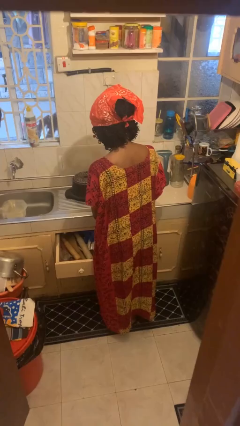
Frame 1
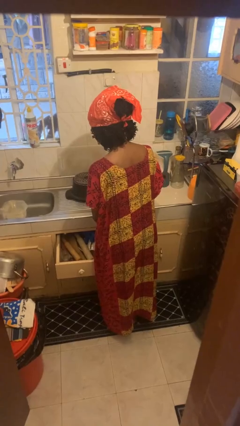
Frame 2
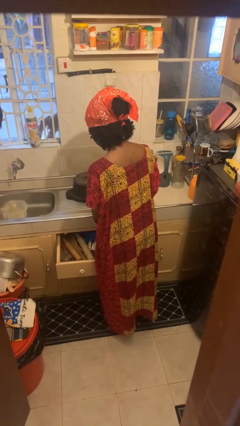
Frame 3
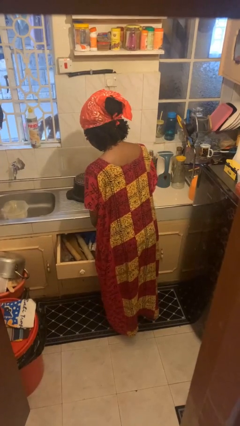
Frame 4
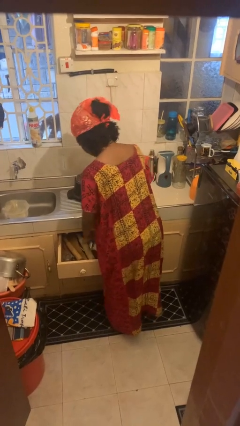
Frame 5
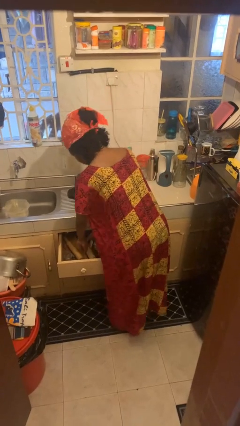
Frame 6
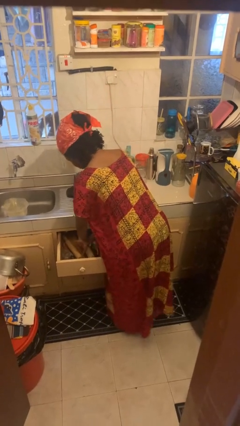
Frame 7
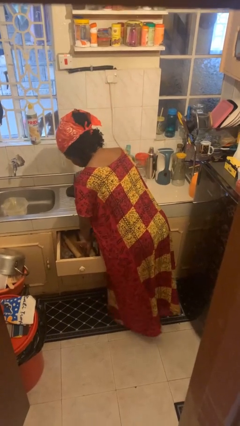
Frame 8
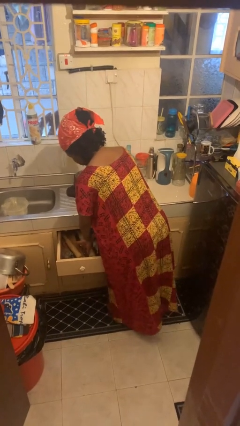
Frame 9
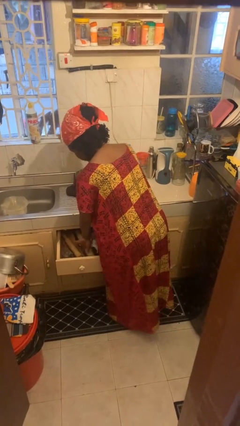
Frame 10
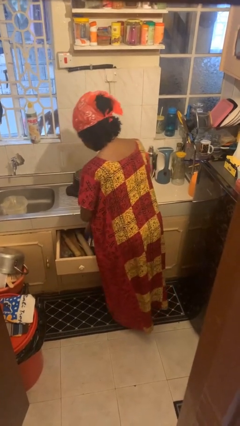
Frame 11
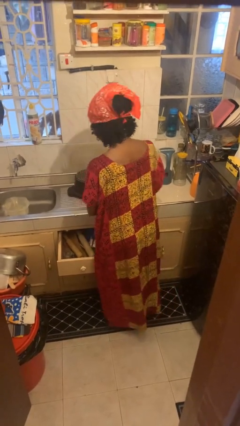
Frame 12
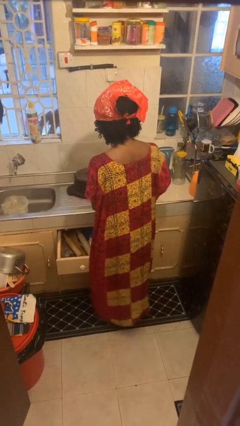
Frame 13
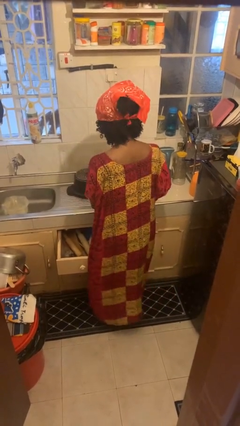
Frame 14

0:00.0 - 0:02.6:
person searches in kitchen drawer

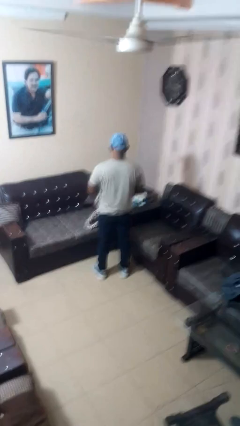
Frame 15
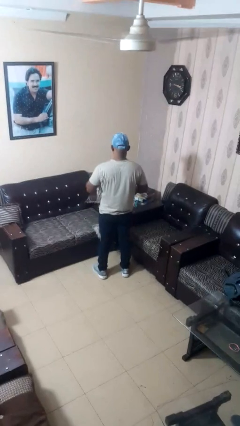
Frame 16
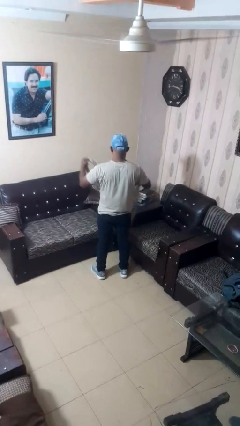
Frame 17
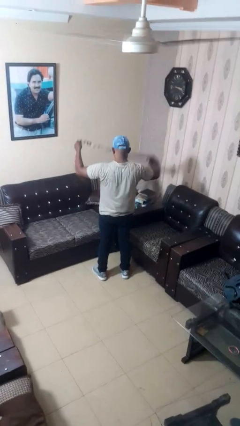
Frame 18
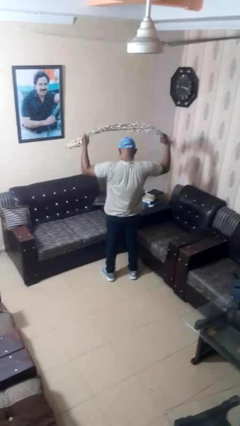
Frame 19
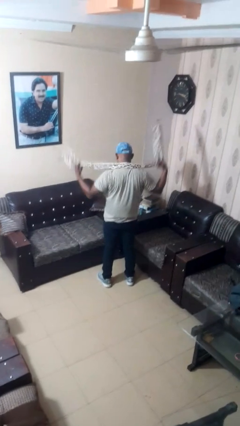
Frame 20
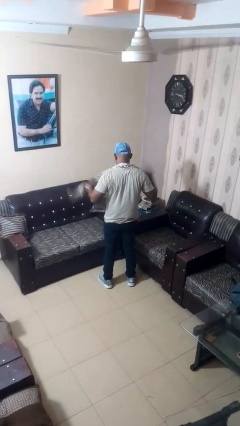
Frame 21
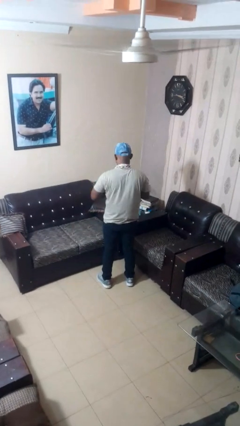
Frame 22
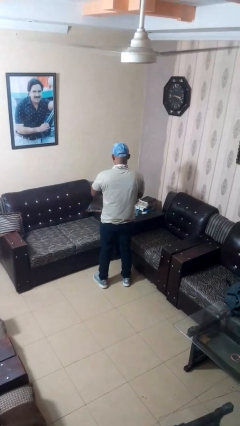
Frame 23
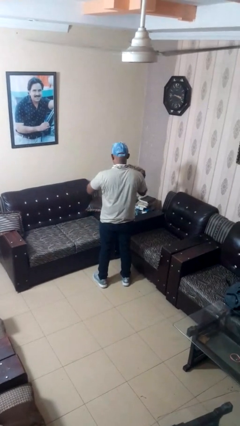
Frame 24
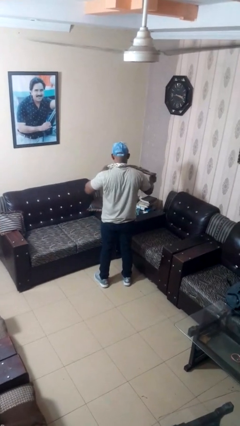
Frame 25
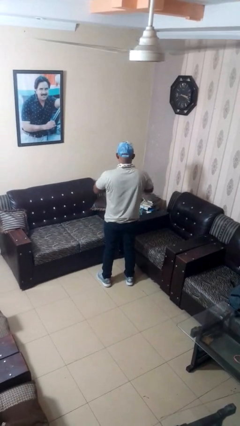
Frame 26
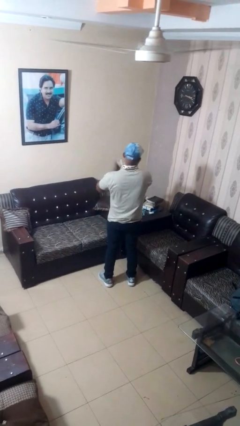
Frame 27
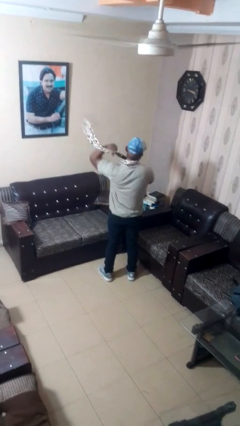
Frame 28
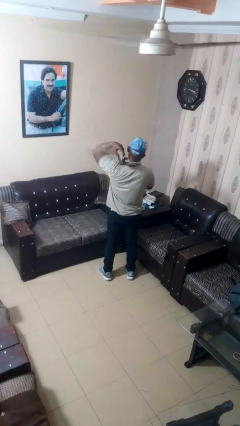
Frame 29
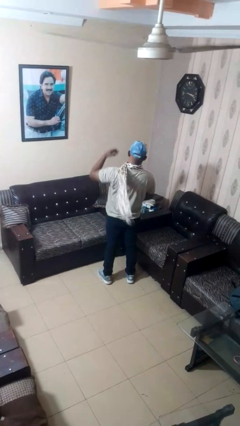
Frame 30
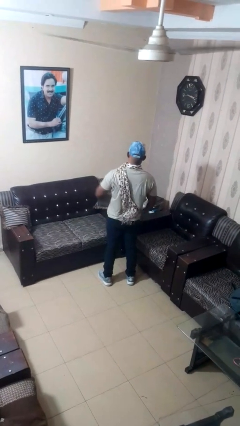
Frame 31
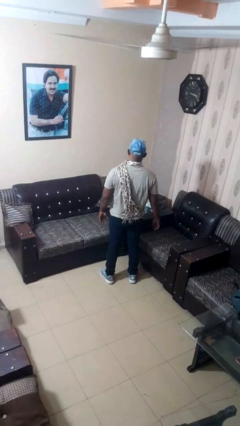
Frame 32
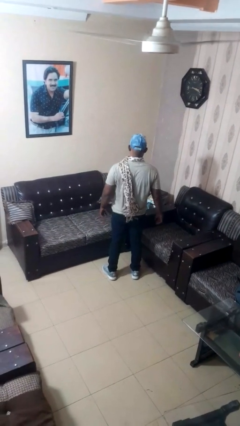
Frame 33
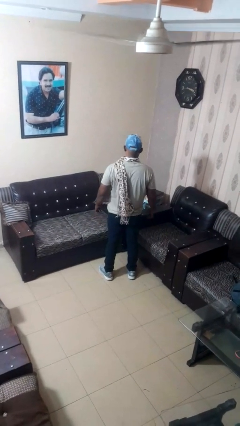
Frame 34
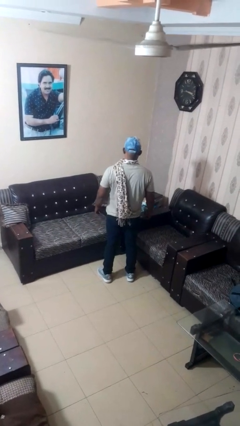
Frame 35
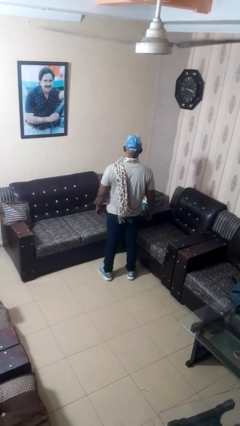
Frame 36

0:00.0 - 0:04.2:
person puts on scarf

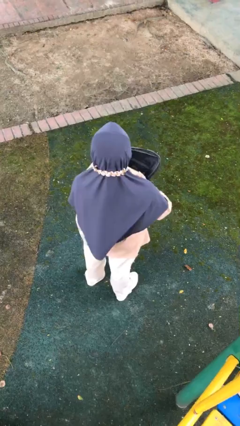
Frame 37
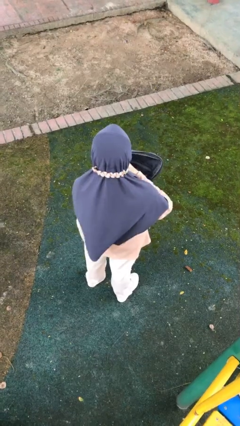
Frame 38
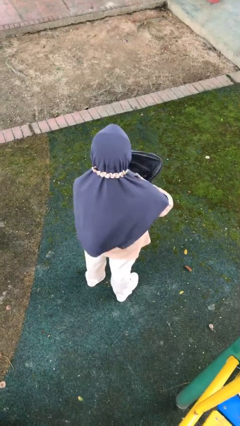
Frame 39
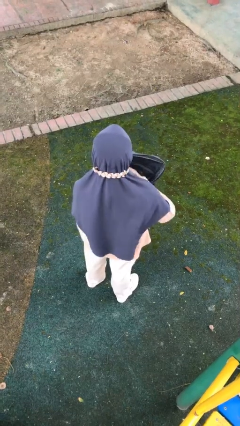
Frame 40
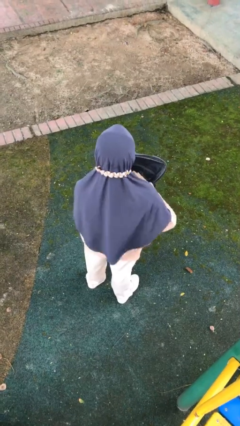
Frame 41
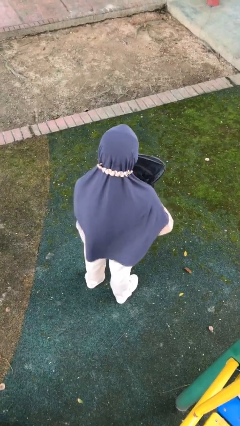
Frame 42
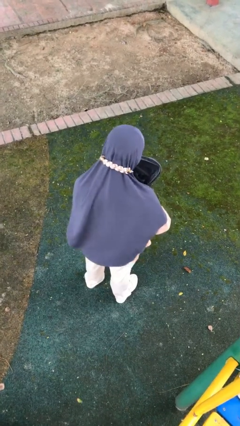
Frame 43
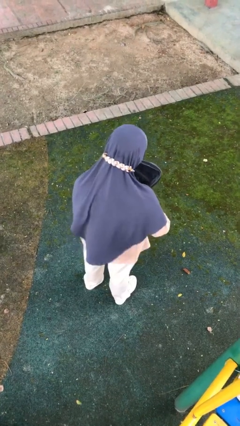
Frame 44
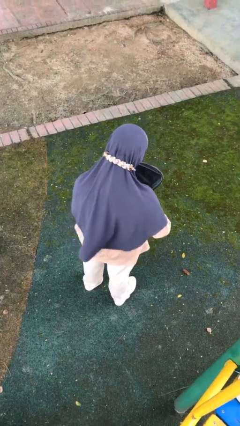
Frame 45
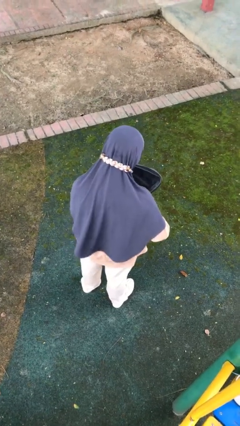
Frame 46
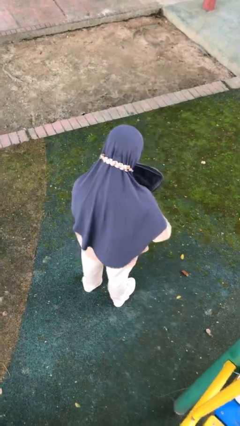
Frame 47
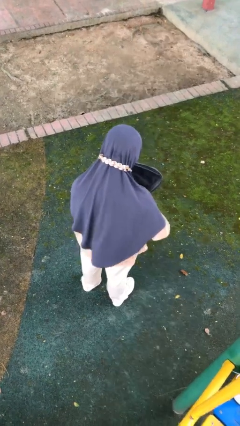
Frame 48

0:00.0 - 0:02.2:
person searches in backpack

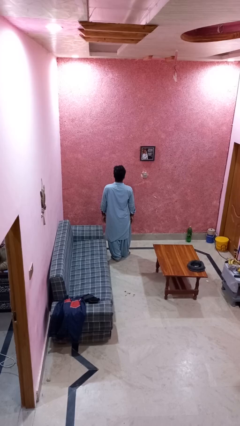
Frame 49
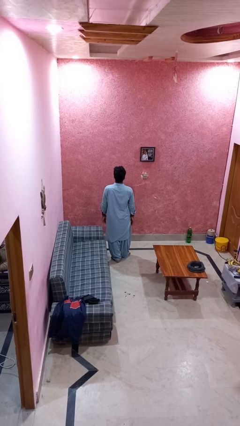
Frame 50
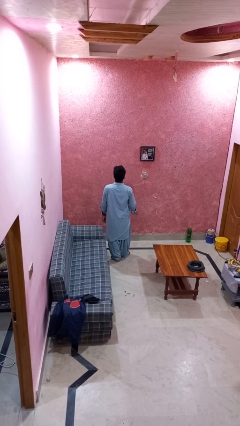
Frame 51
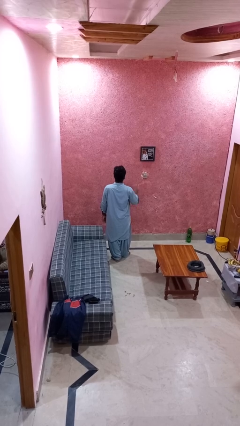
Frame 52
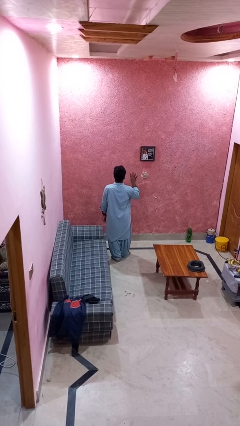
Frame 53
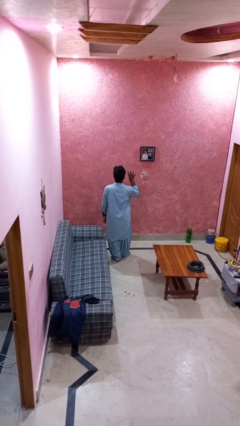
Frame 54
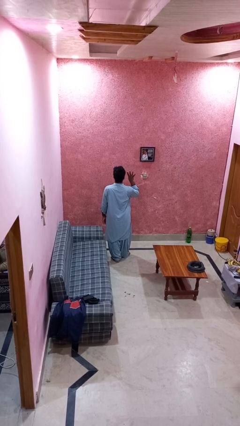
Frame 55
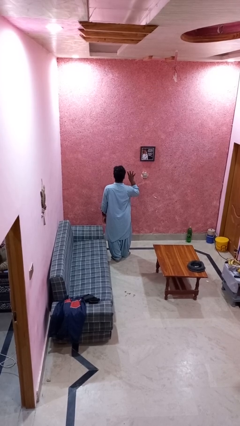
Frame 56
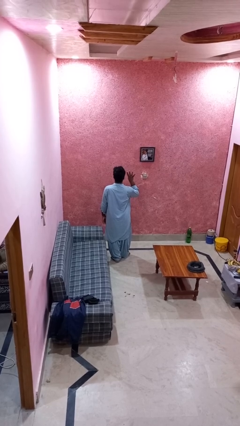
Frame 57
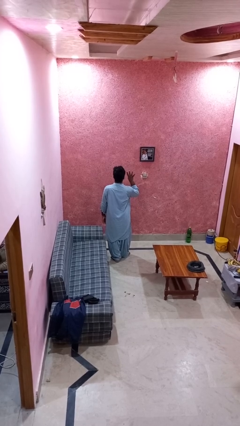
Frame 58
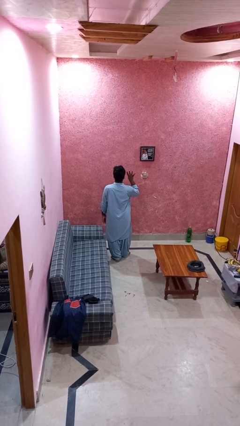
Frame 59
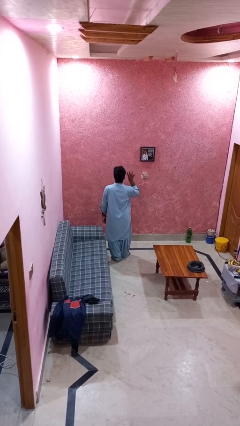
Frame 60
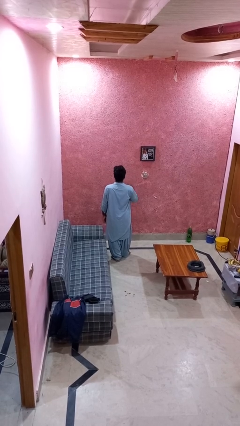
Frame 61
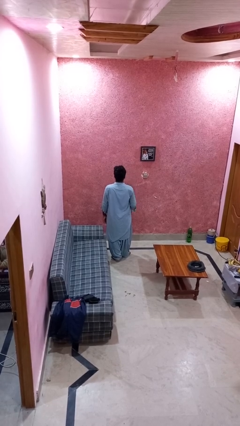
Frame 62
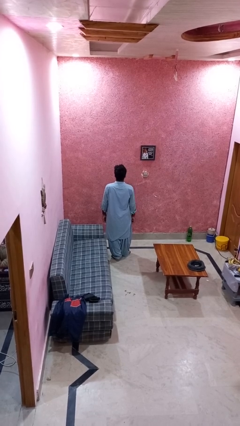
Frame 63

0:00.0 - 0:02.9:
person gestures number four

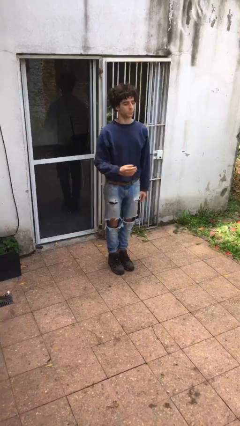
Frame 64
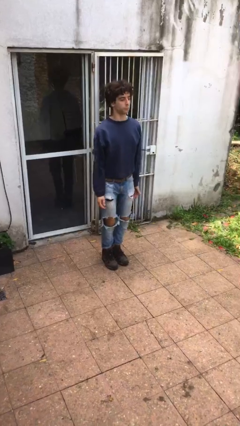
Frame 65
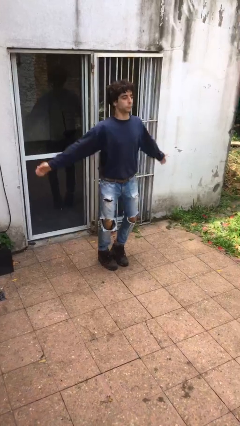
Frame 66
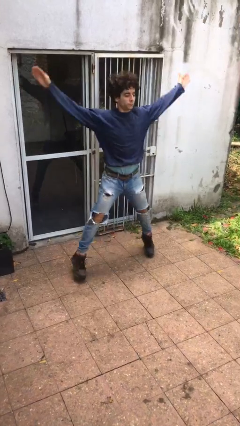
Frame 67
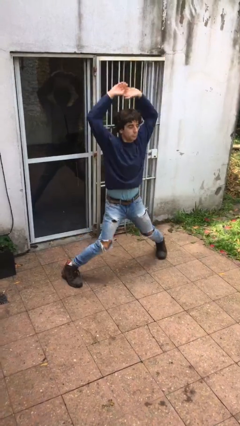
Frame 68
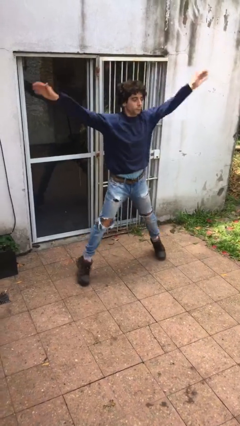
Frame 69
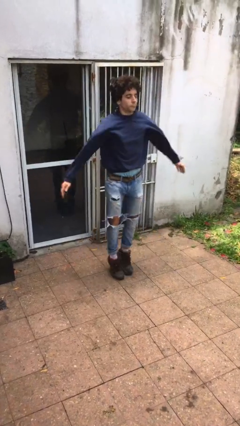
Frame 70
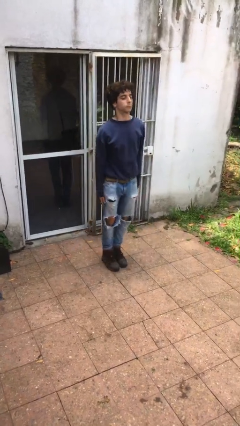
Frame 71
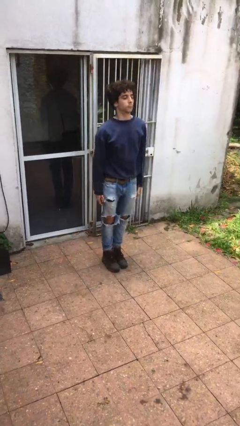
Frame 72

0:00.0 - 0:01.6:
person exercises with jumping jacks

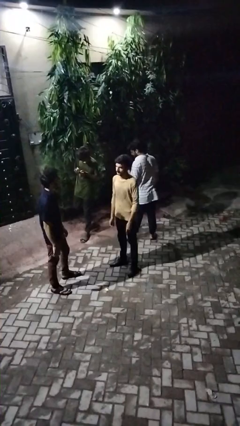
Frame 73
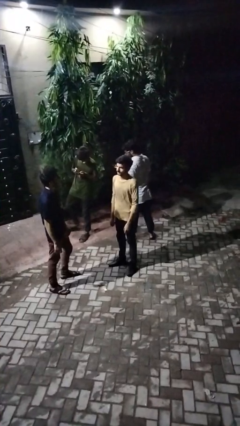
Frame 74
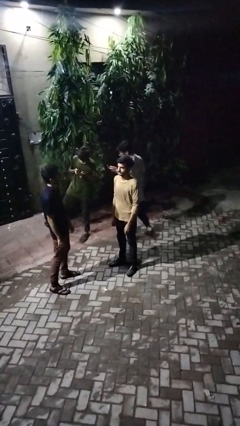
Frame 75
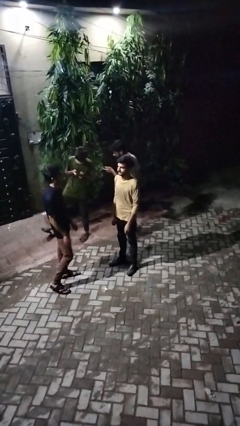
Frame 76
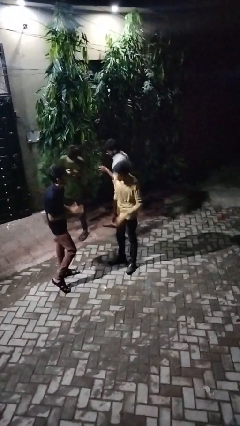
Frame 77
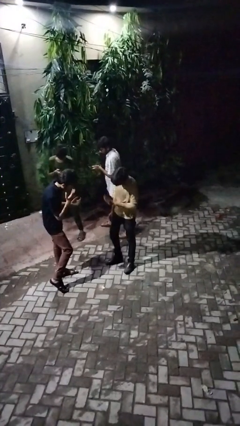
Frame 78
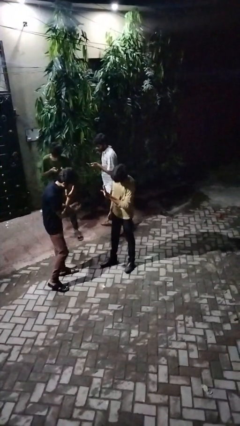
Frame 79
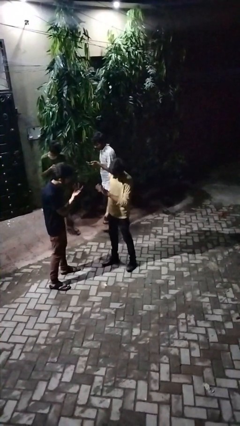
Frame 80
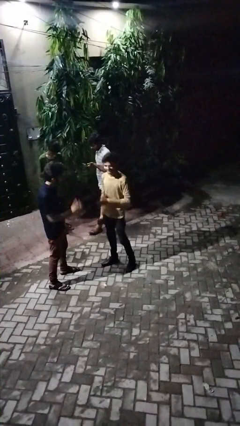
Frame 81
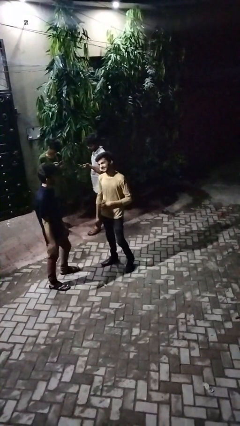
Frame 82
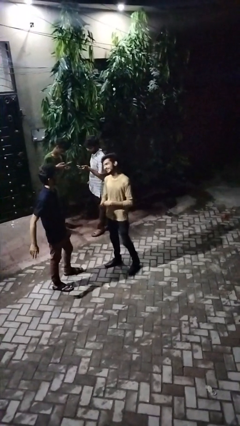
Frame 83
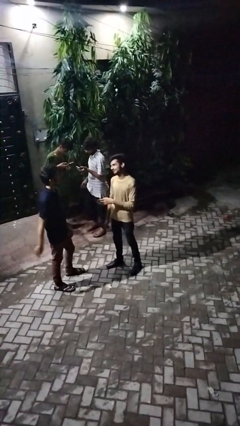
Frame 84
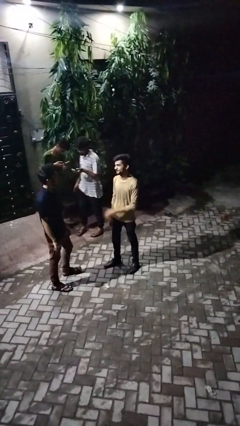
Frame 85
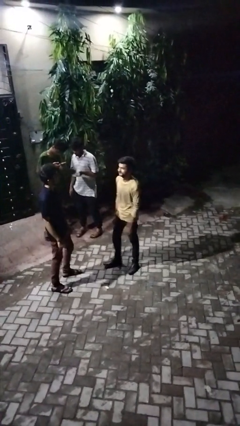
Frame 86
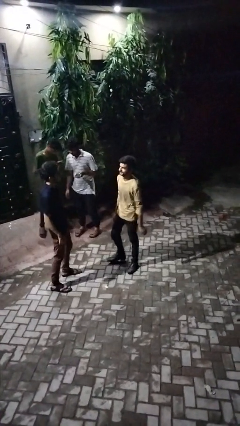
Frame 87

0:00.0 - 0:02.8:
person laughs with person

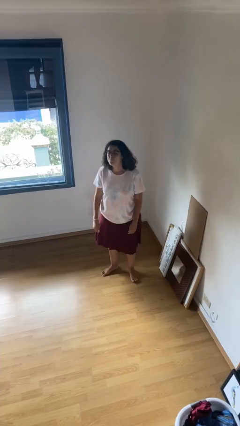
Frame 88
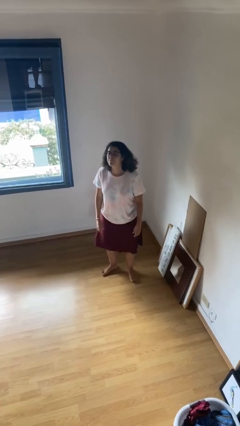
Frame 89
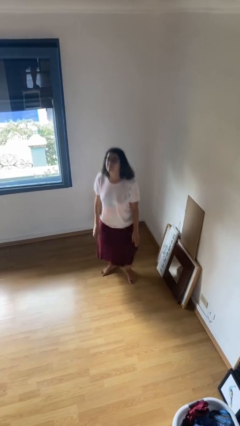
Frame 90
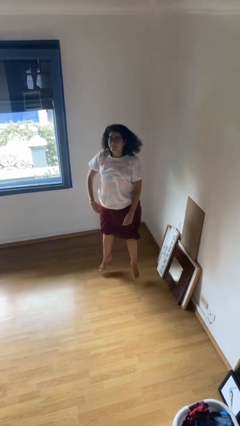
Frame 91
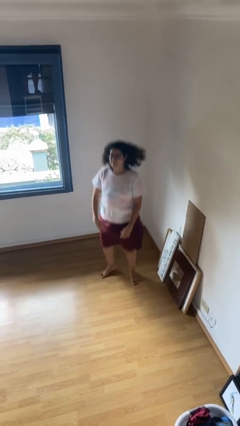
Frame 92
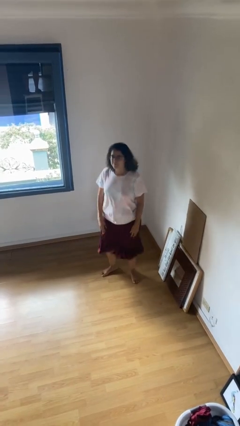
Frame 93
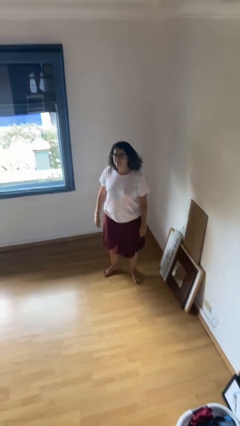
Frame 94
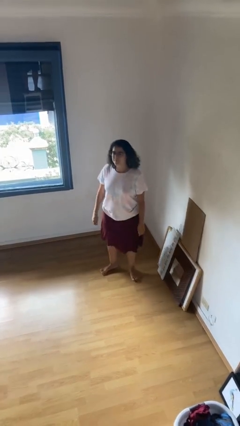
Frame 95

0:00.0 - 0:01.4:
person jumps
